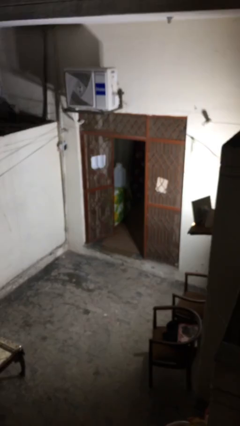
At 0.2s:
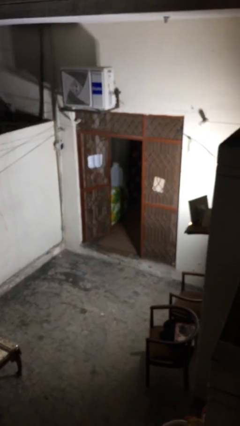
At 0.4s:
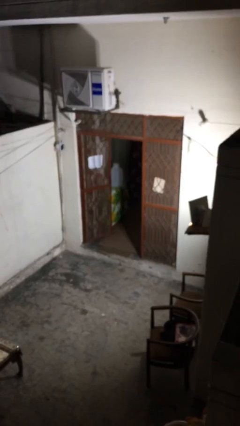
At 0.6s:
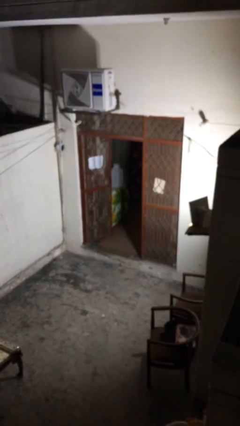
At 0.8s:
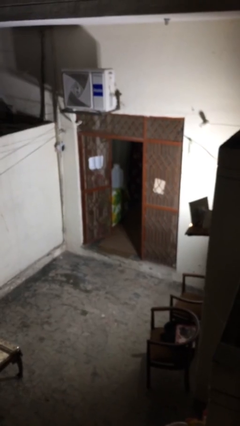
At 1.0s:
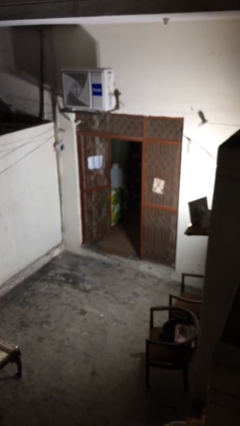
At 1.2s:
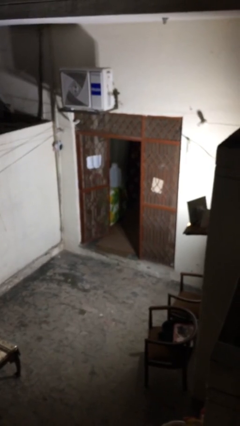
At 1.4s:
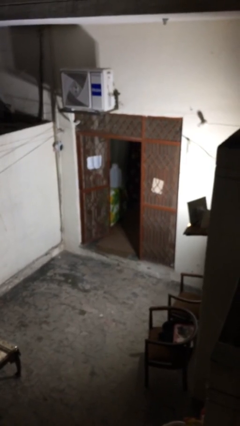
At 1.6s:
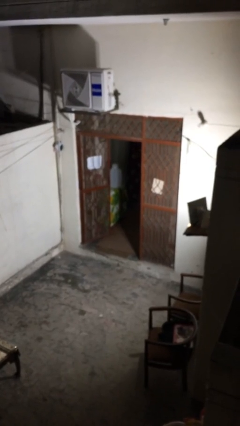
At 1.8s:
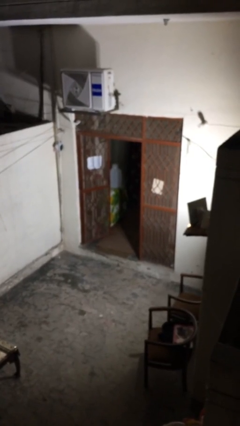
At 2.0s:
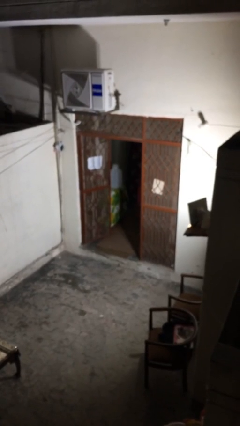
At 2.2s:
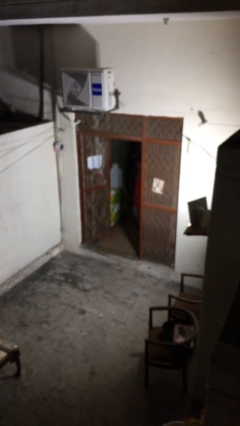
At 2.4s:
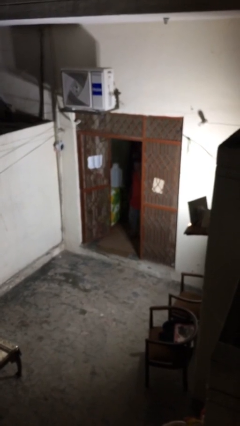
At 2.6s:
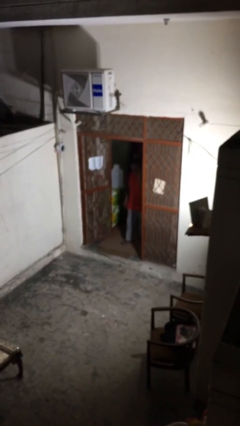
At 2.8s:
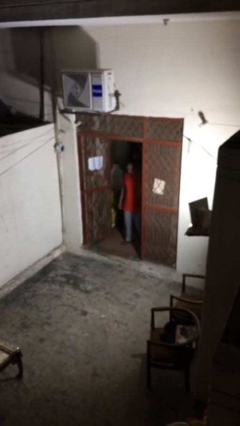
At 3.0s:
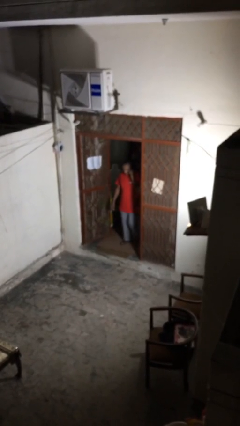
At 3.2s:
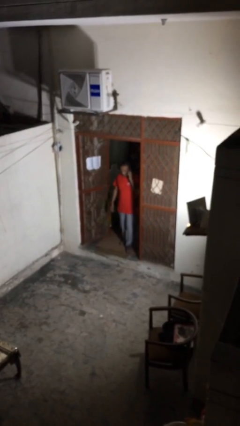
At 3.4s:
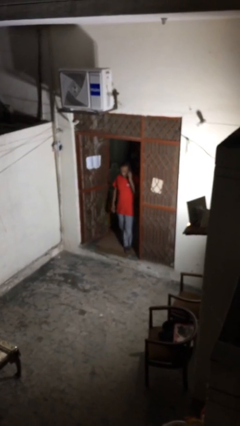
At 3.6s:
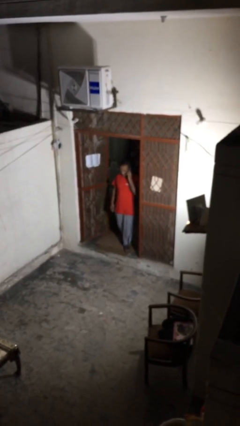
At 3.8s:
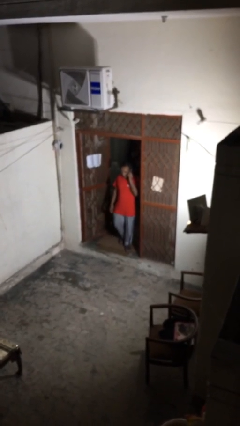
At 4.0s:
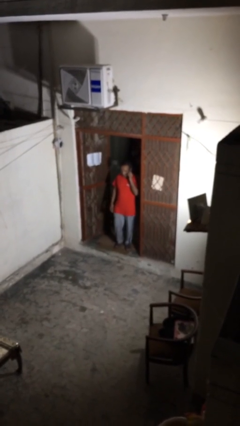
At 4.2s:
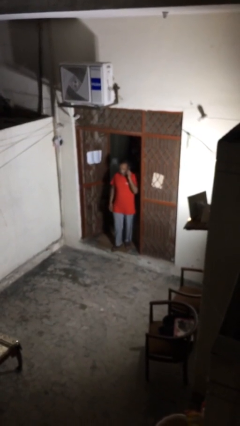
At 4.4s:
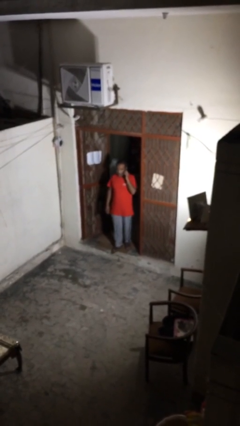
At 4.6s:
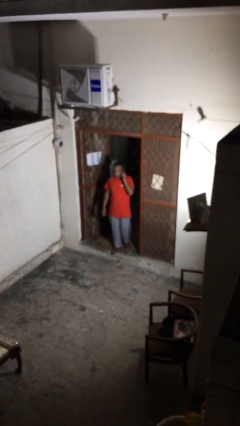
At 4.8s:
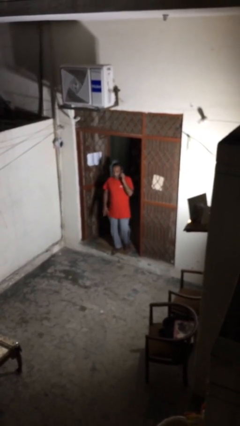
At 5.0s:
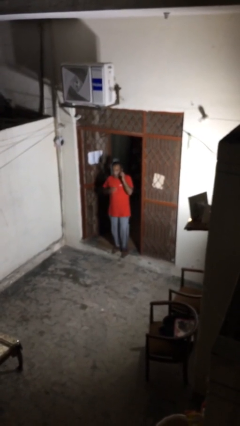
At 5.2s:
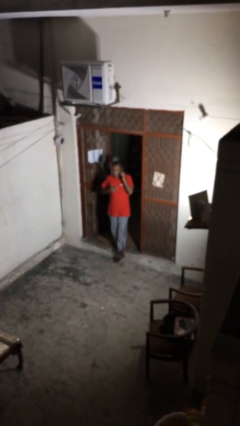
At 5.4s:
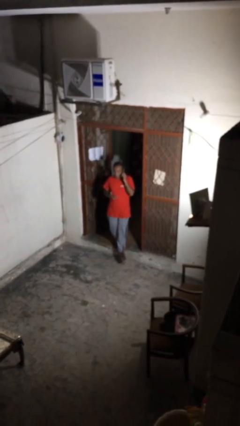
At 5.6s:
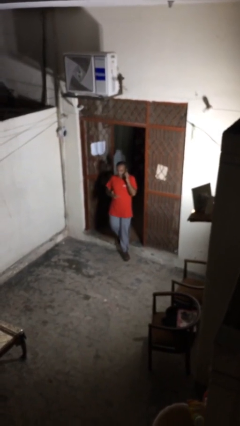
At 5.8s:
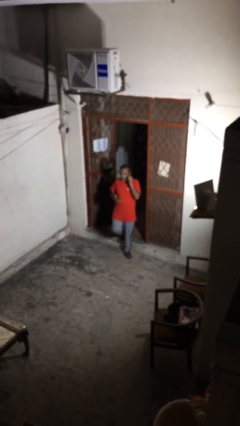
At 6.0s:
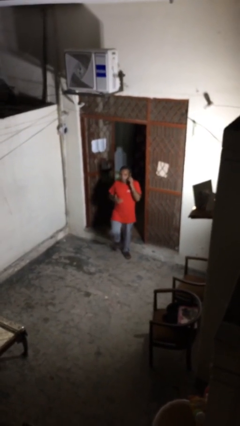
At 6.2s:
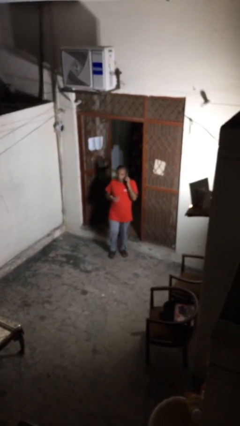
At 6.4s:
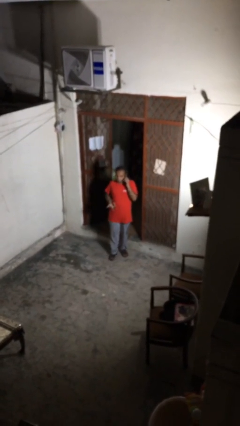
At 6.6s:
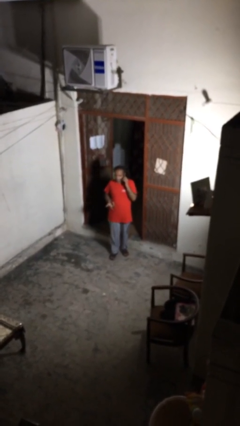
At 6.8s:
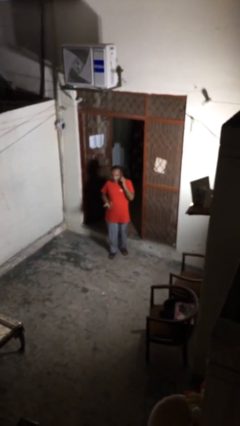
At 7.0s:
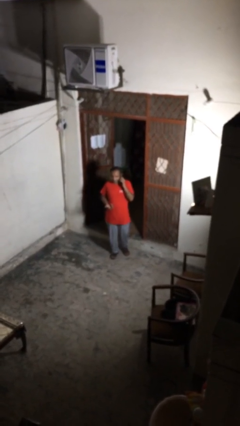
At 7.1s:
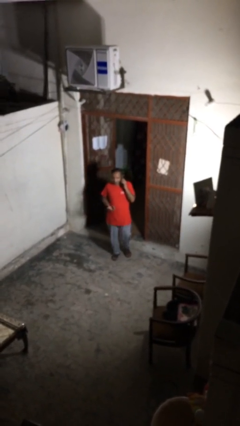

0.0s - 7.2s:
person enters scene through structure

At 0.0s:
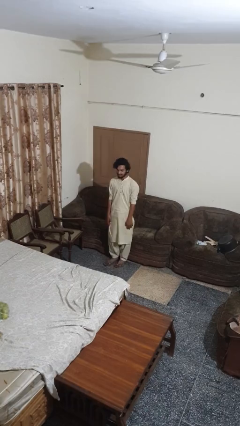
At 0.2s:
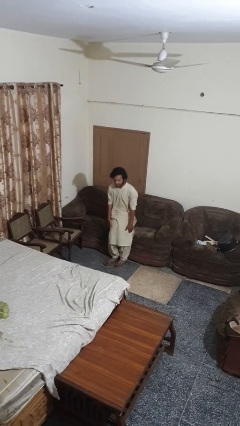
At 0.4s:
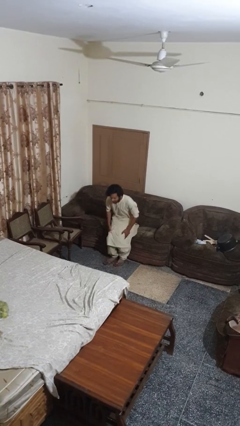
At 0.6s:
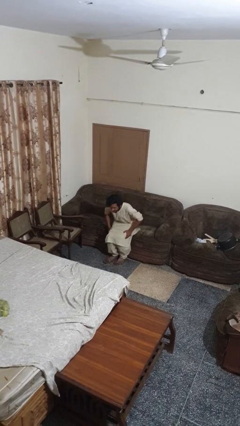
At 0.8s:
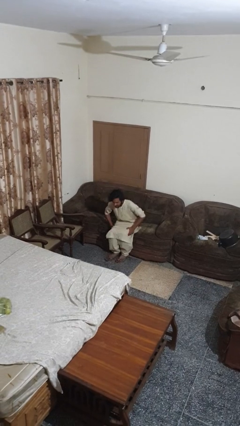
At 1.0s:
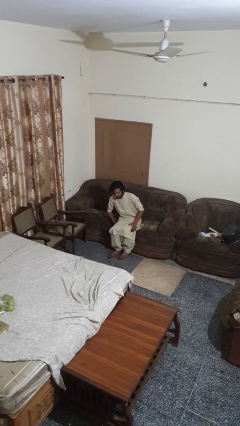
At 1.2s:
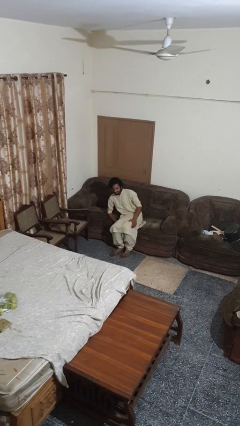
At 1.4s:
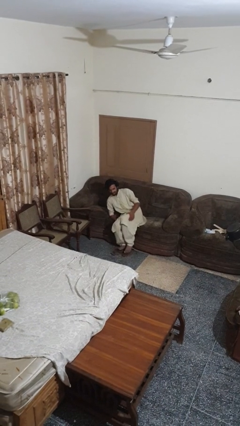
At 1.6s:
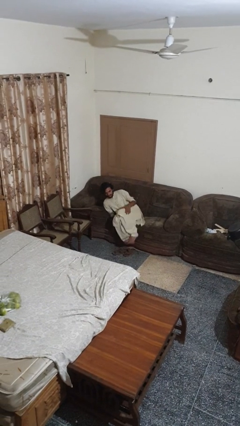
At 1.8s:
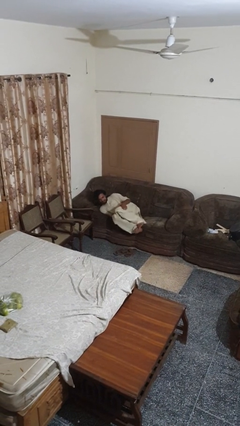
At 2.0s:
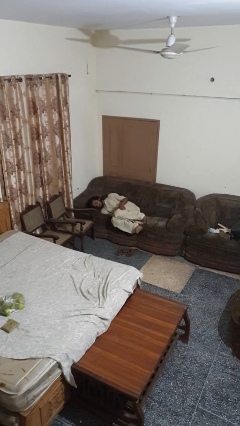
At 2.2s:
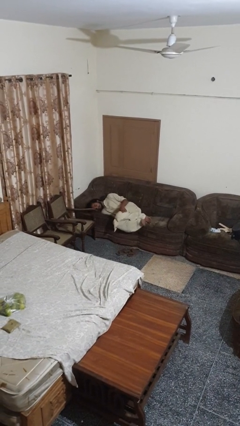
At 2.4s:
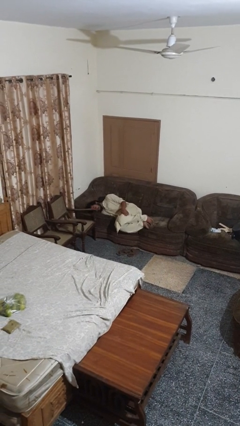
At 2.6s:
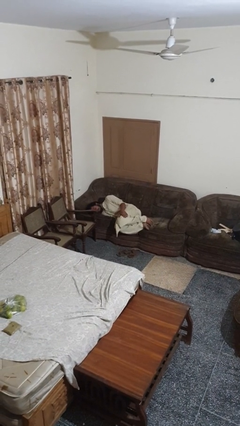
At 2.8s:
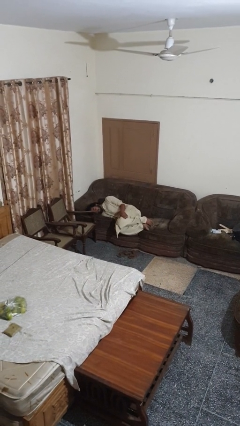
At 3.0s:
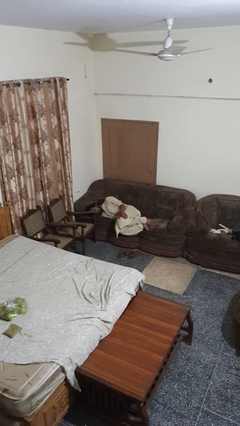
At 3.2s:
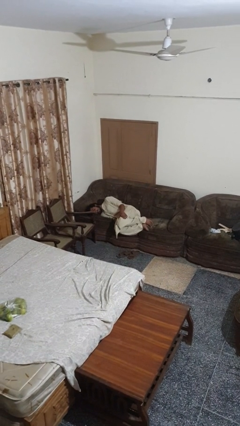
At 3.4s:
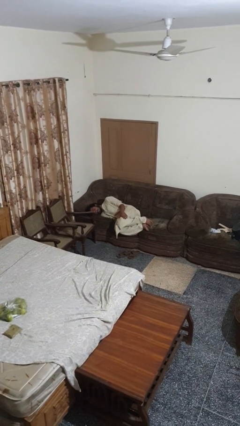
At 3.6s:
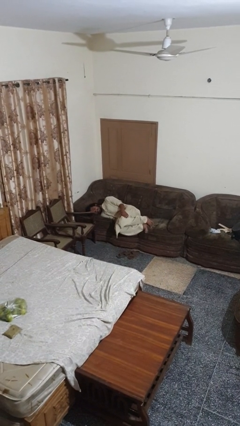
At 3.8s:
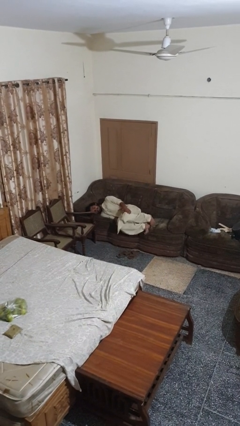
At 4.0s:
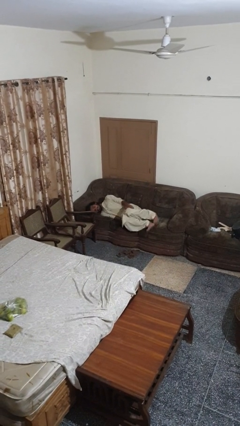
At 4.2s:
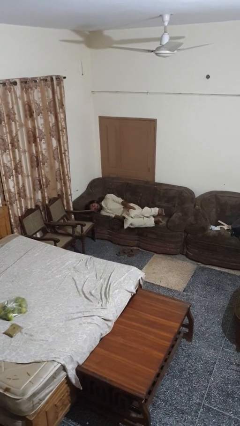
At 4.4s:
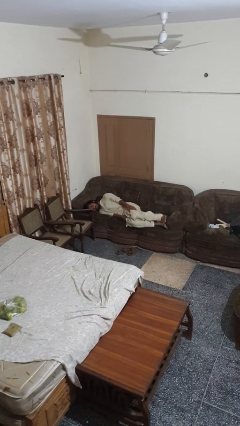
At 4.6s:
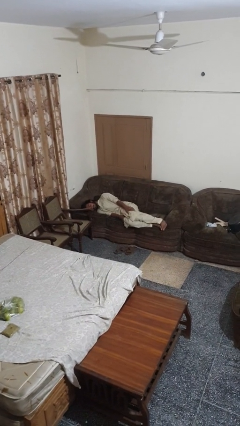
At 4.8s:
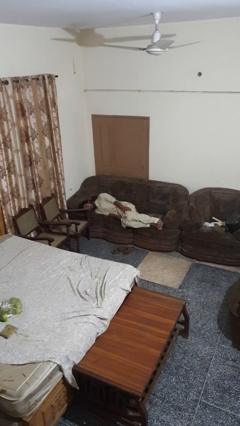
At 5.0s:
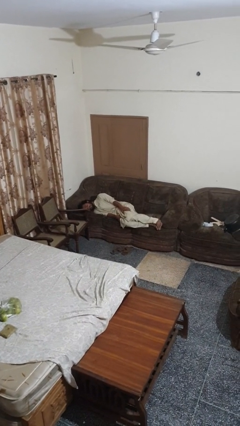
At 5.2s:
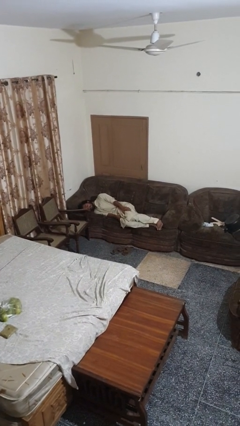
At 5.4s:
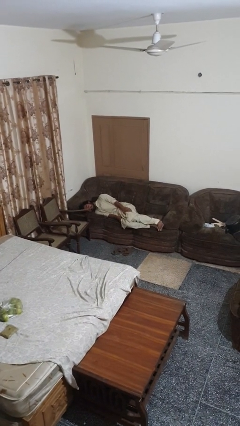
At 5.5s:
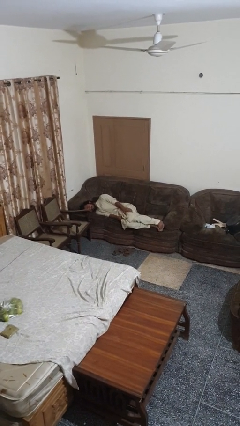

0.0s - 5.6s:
person lies down on couch

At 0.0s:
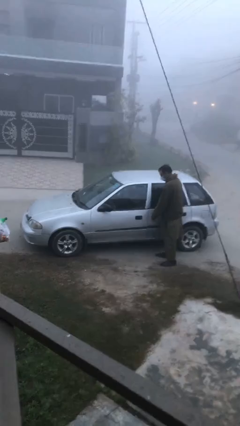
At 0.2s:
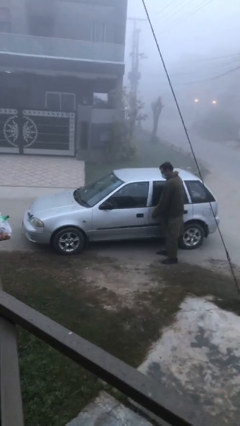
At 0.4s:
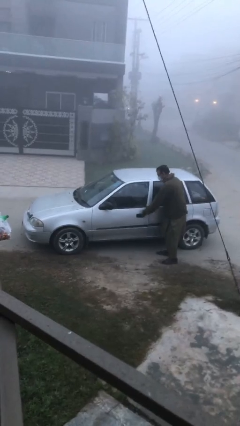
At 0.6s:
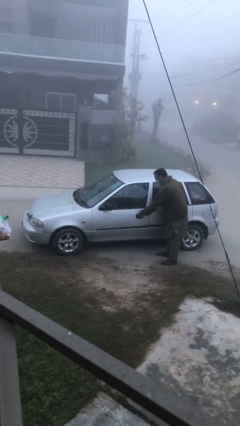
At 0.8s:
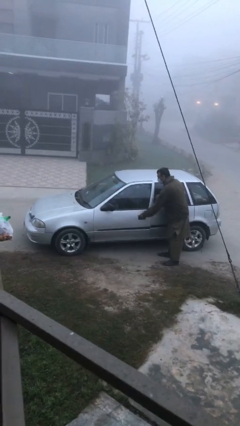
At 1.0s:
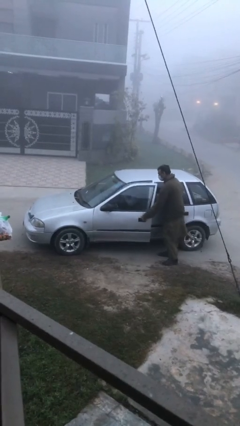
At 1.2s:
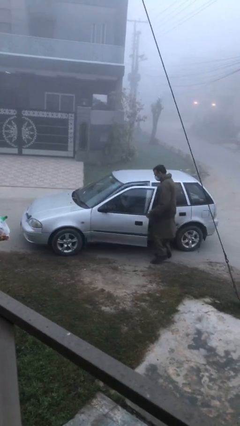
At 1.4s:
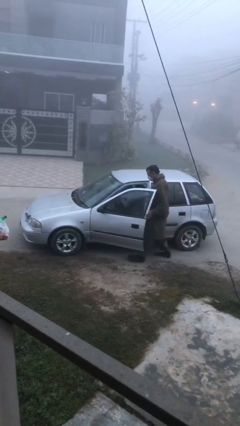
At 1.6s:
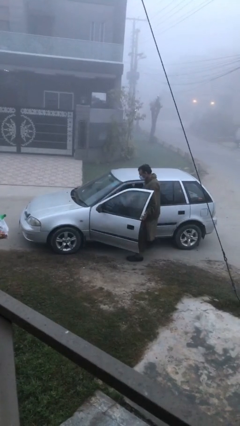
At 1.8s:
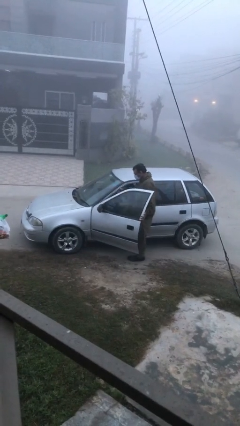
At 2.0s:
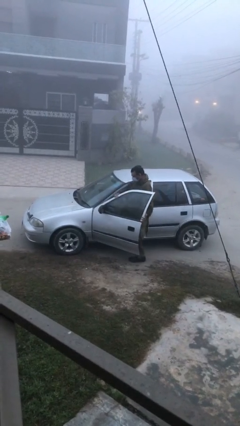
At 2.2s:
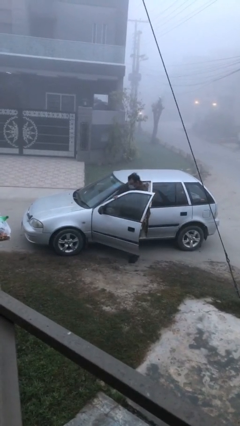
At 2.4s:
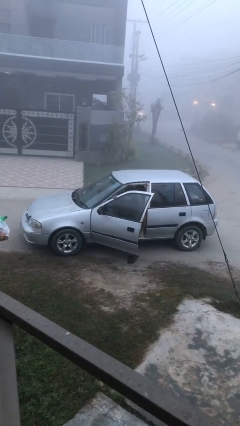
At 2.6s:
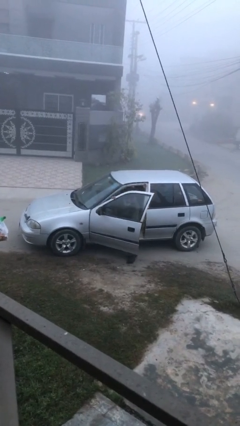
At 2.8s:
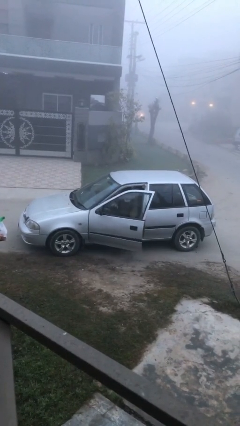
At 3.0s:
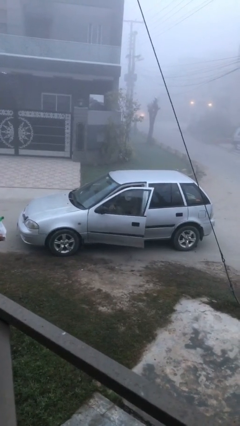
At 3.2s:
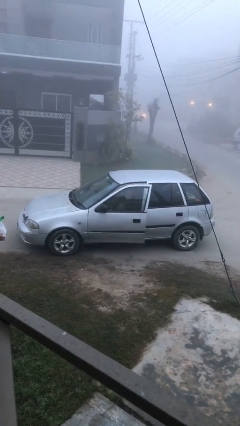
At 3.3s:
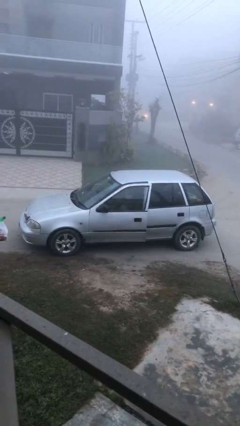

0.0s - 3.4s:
car picks up person

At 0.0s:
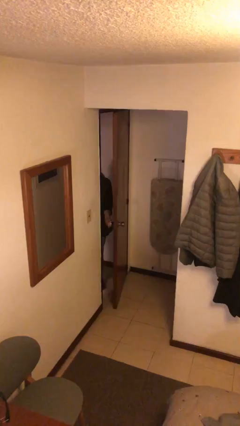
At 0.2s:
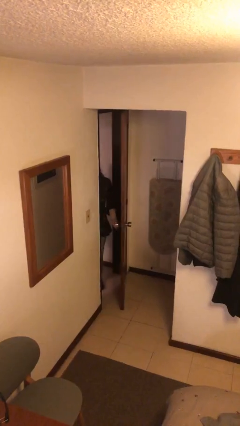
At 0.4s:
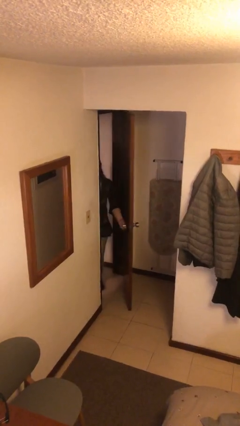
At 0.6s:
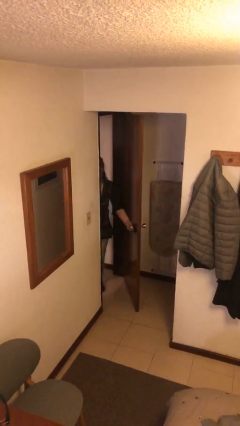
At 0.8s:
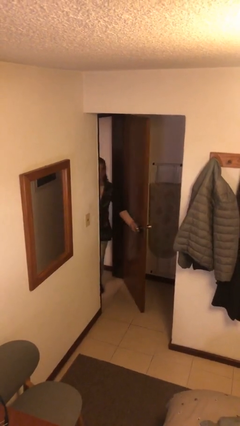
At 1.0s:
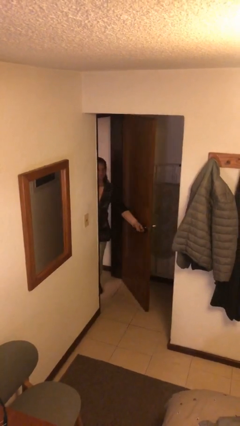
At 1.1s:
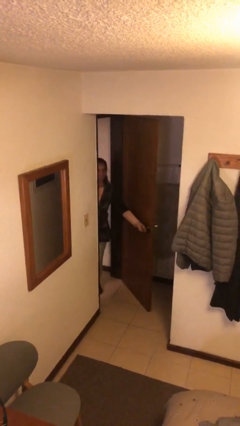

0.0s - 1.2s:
person opens facility door

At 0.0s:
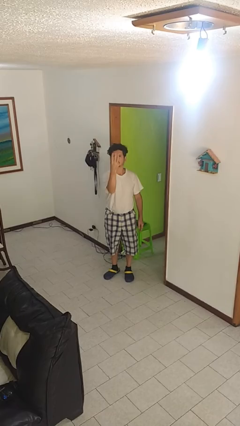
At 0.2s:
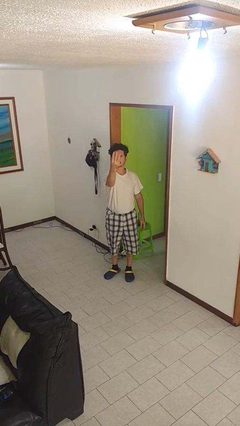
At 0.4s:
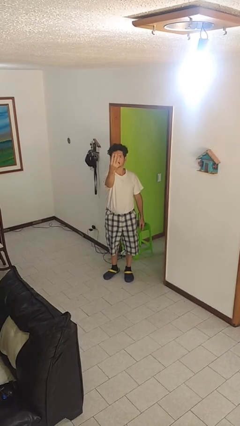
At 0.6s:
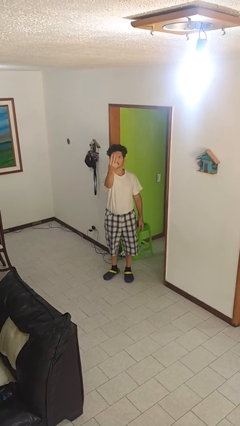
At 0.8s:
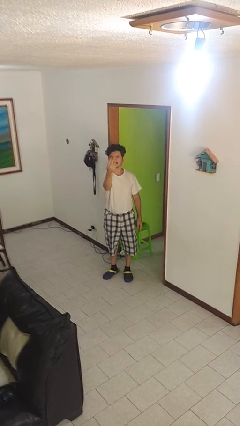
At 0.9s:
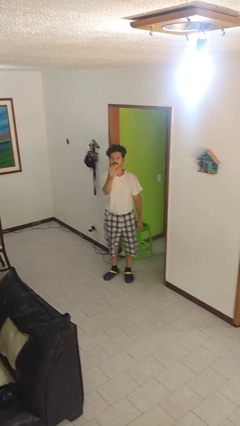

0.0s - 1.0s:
person gestures number three
